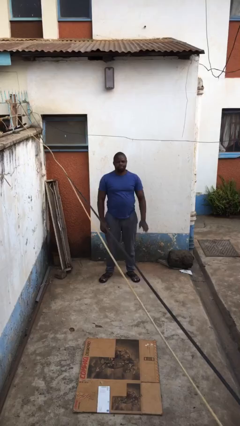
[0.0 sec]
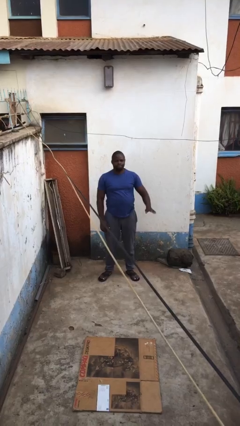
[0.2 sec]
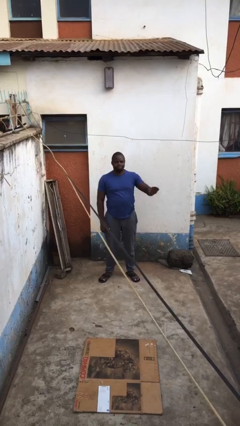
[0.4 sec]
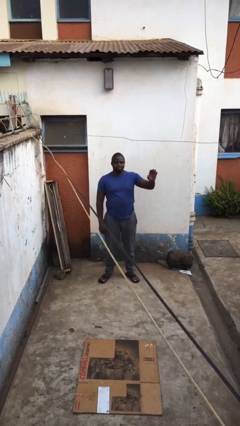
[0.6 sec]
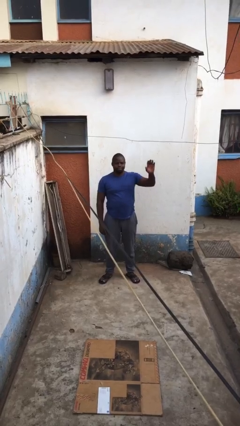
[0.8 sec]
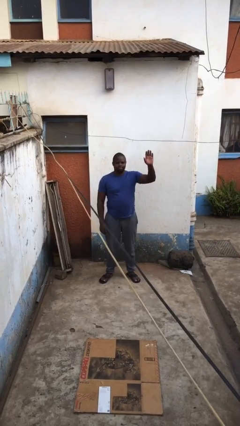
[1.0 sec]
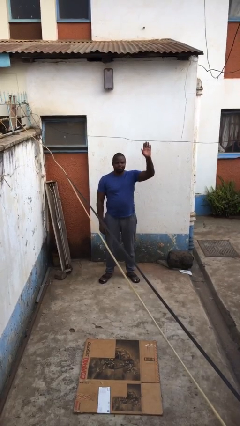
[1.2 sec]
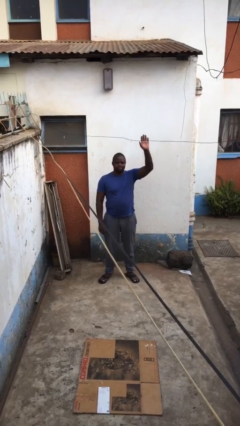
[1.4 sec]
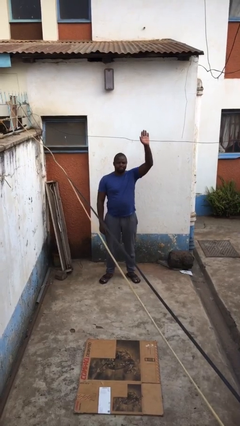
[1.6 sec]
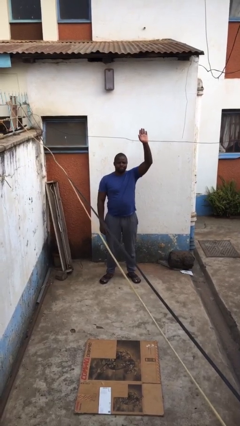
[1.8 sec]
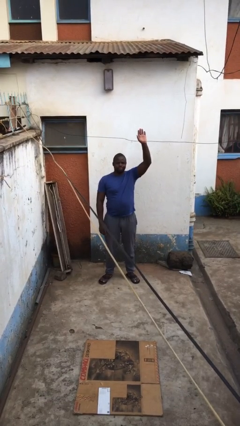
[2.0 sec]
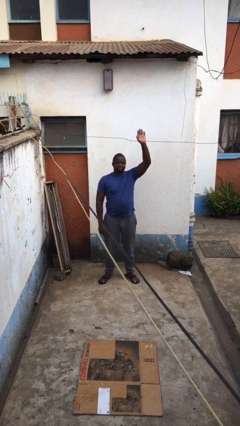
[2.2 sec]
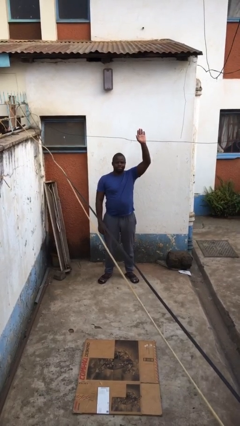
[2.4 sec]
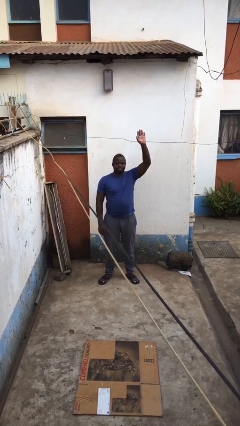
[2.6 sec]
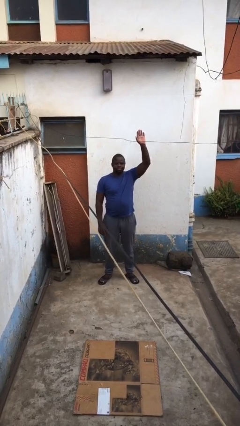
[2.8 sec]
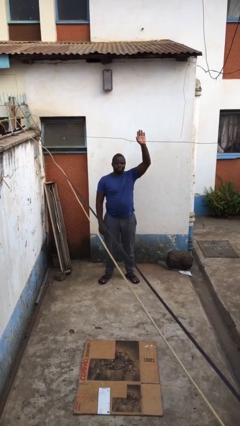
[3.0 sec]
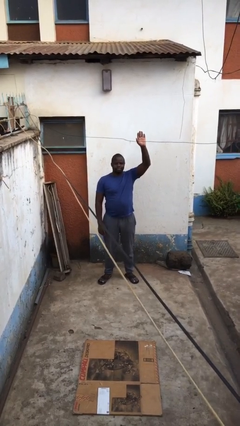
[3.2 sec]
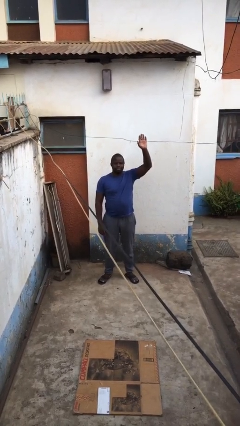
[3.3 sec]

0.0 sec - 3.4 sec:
person gestures raise hand

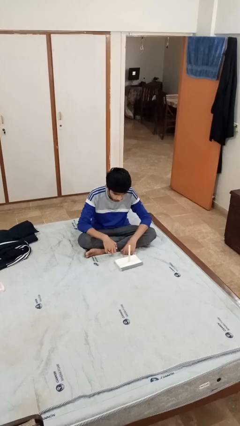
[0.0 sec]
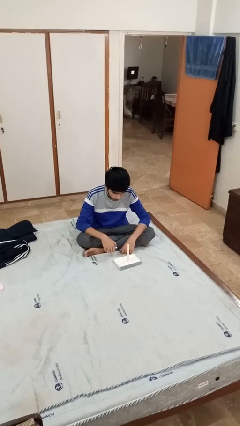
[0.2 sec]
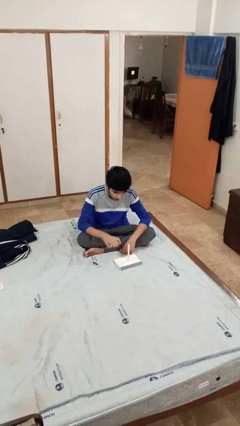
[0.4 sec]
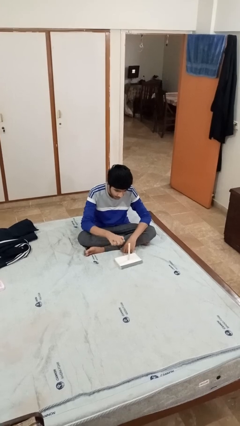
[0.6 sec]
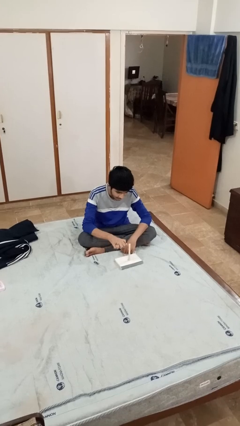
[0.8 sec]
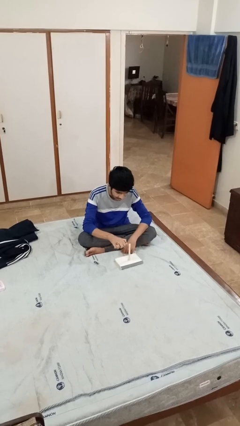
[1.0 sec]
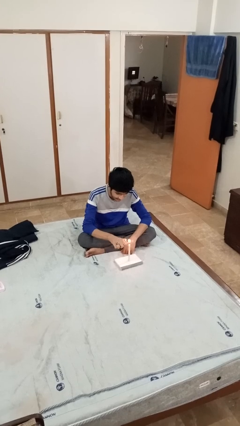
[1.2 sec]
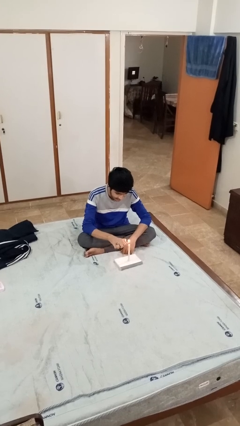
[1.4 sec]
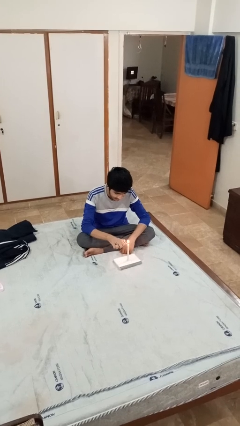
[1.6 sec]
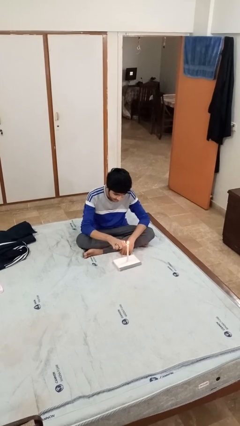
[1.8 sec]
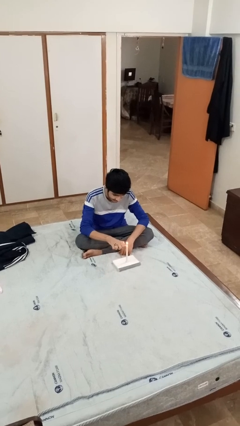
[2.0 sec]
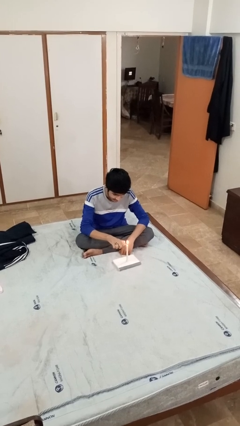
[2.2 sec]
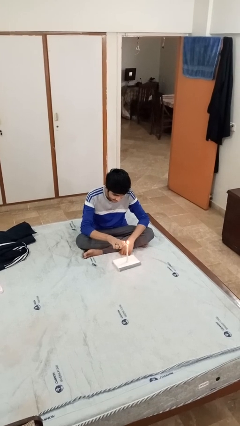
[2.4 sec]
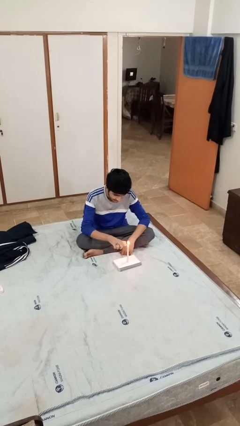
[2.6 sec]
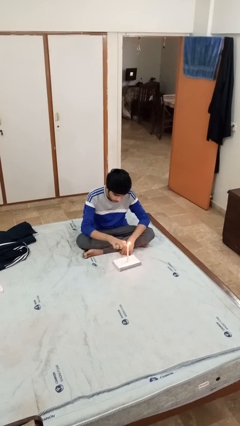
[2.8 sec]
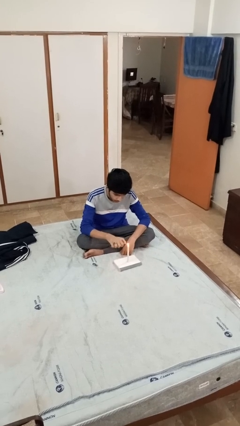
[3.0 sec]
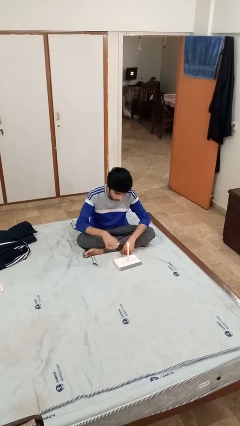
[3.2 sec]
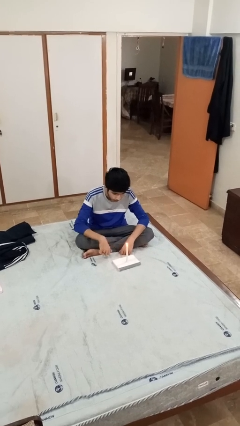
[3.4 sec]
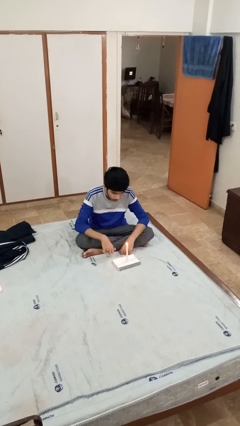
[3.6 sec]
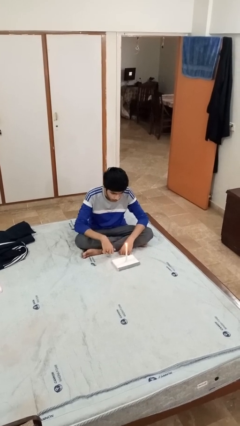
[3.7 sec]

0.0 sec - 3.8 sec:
person lights candle

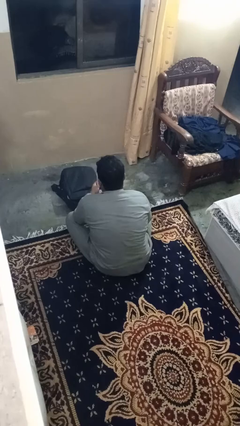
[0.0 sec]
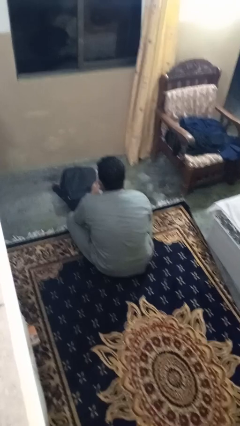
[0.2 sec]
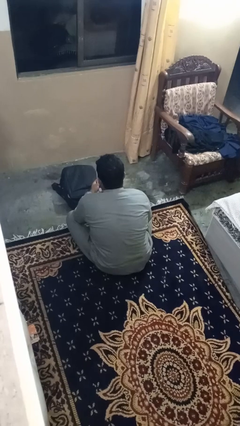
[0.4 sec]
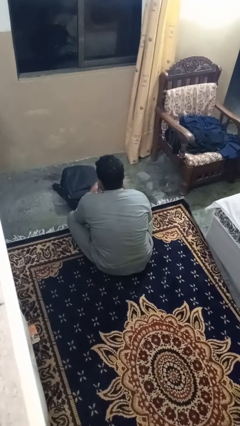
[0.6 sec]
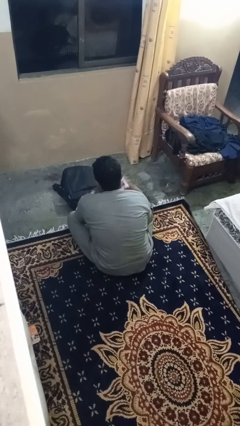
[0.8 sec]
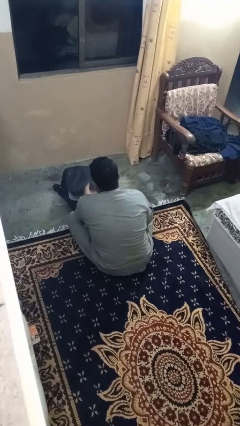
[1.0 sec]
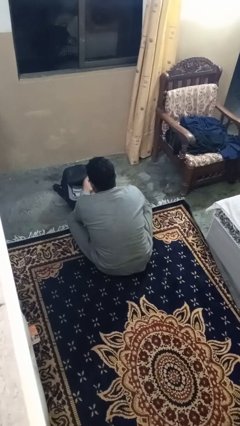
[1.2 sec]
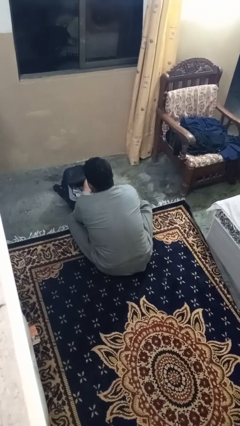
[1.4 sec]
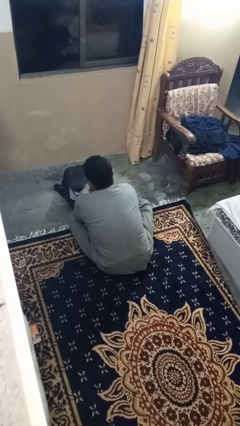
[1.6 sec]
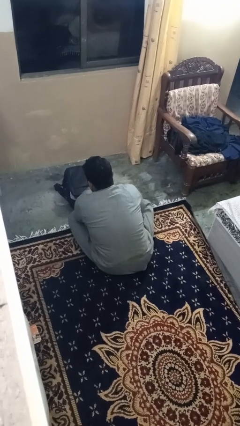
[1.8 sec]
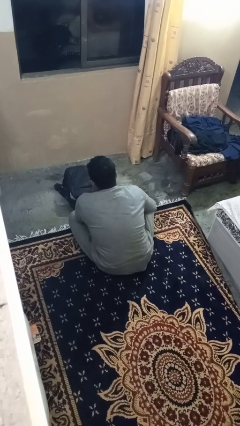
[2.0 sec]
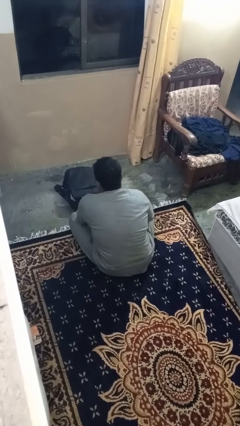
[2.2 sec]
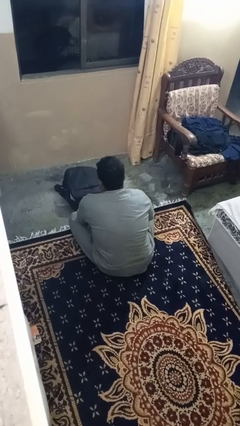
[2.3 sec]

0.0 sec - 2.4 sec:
person puts object into bag

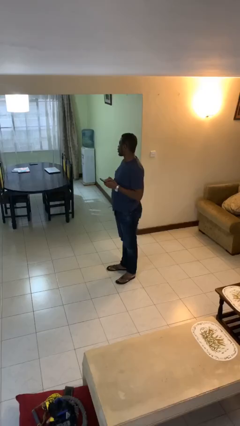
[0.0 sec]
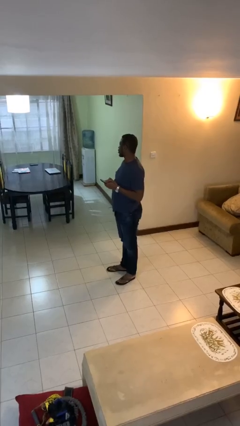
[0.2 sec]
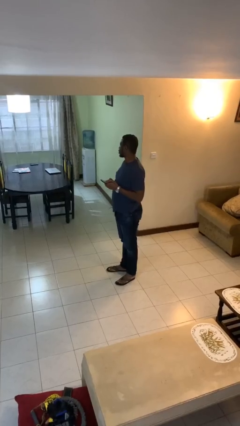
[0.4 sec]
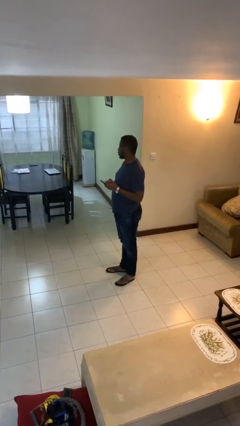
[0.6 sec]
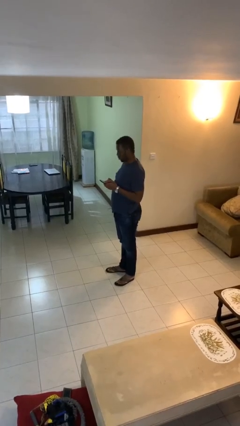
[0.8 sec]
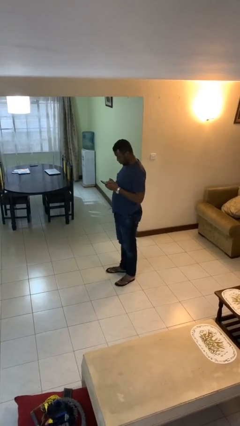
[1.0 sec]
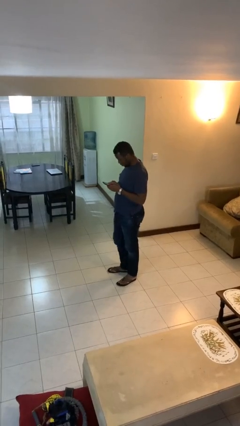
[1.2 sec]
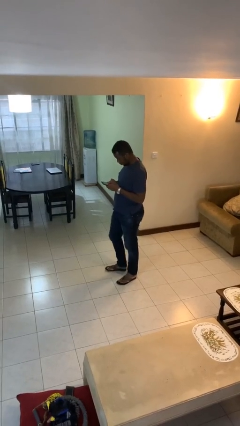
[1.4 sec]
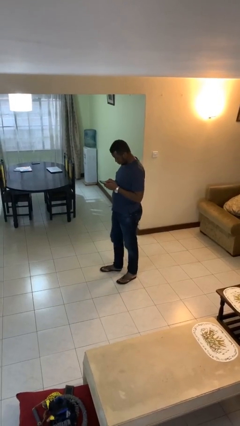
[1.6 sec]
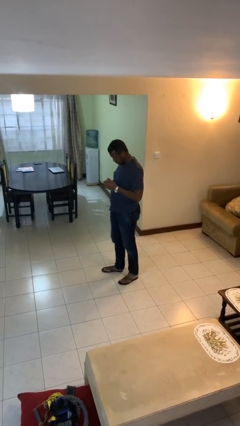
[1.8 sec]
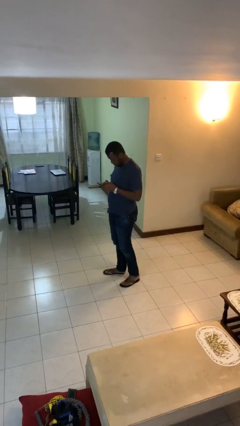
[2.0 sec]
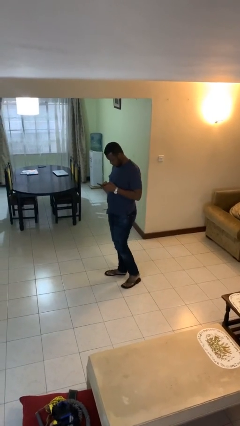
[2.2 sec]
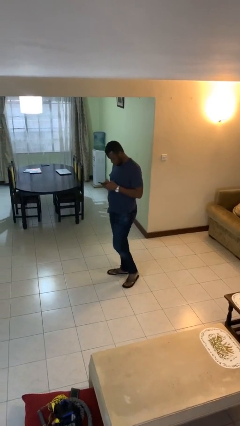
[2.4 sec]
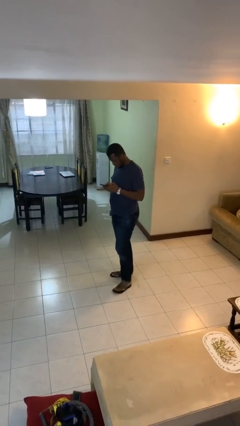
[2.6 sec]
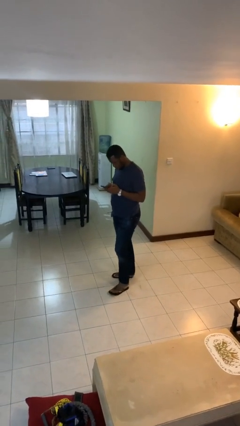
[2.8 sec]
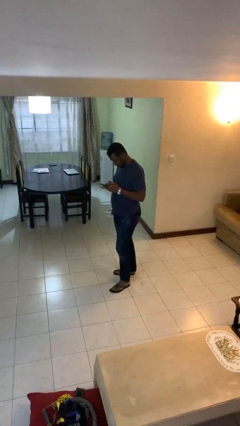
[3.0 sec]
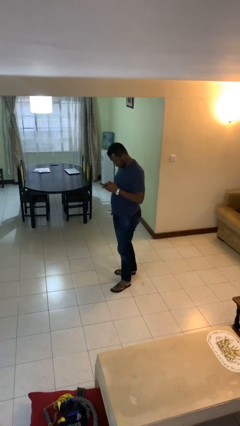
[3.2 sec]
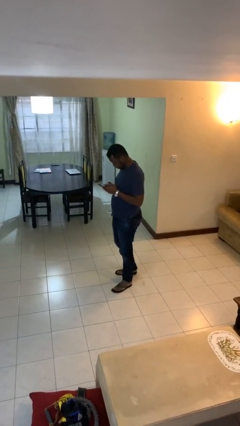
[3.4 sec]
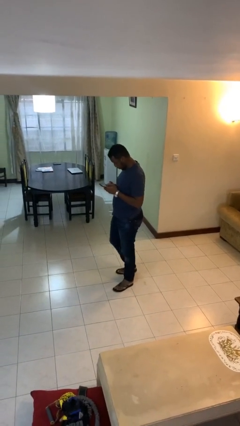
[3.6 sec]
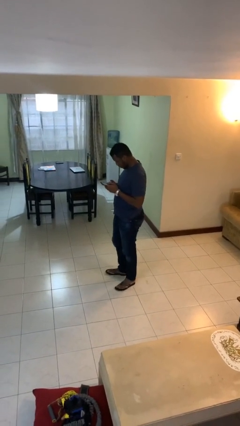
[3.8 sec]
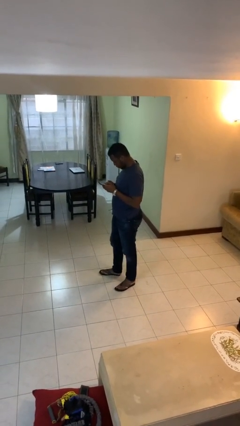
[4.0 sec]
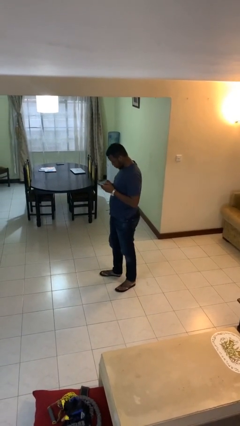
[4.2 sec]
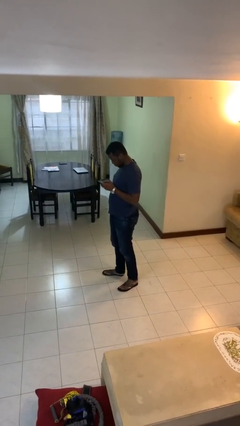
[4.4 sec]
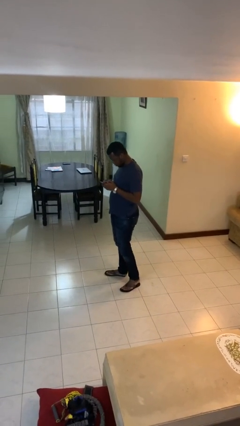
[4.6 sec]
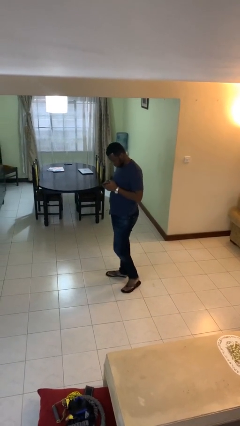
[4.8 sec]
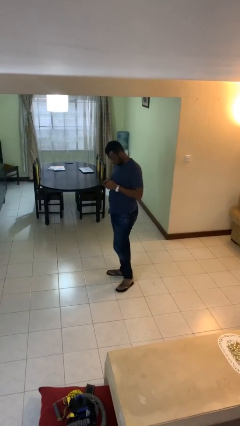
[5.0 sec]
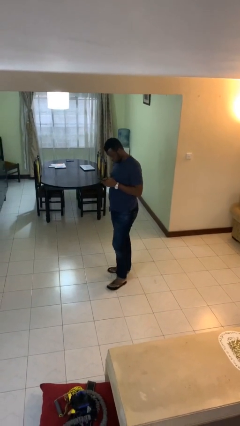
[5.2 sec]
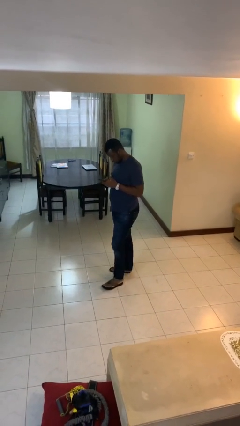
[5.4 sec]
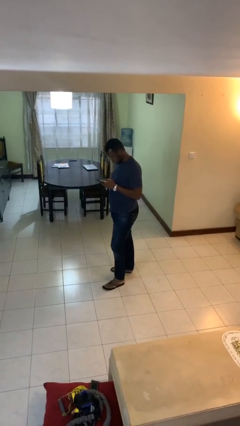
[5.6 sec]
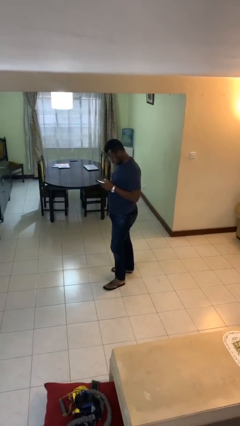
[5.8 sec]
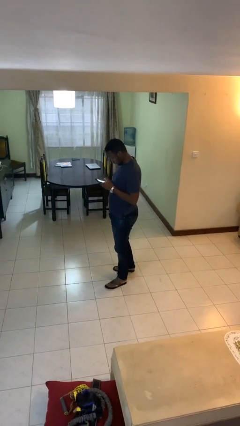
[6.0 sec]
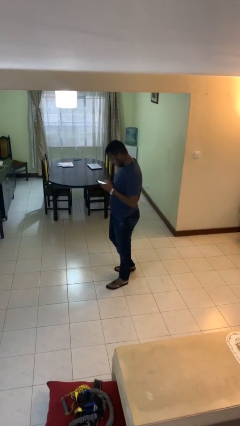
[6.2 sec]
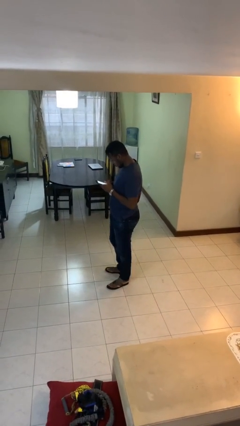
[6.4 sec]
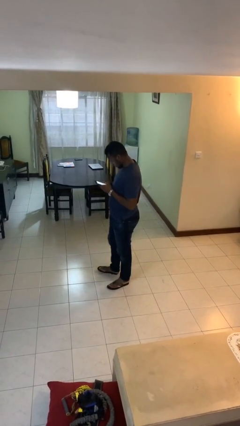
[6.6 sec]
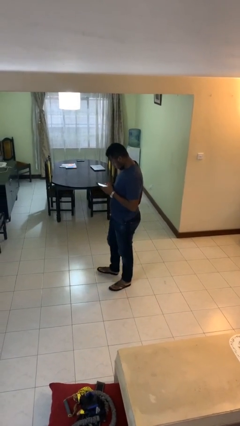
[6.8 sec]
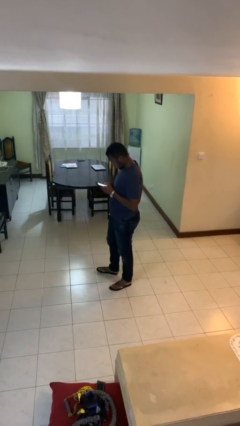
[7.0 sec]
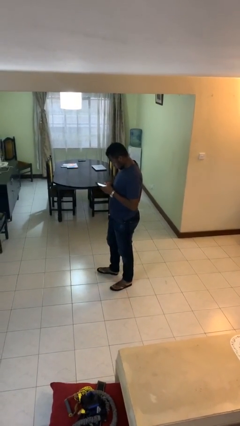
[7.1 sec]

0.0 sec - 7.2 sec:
person texts on phone

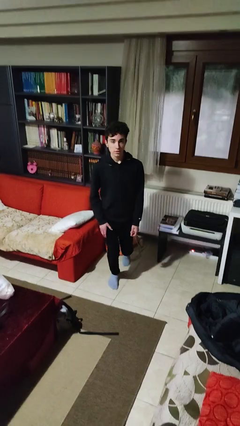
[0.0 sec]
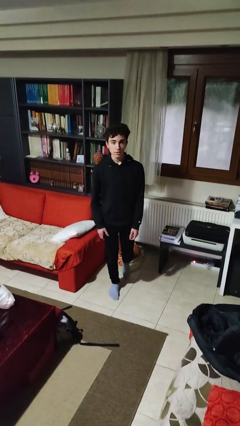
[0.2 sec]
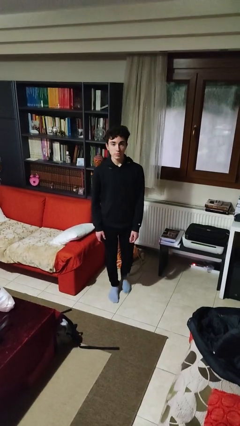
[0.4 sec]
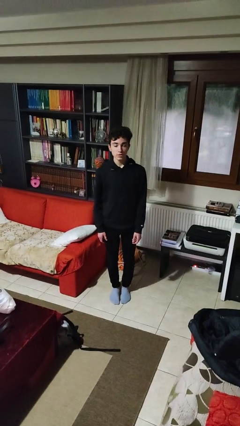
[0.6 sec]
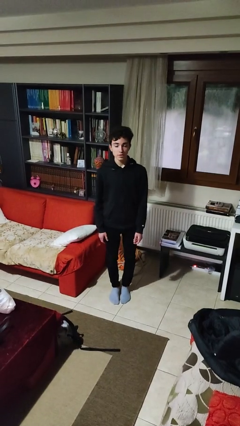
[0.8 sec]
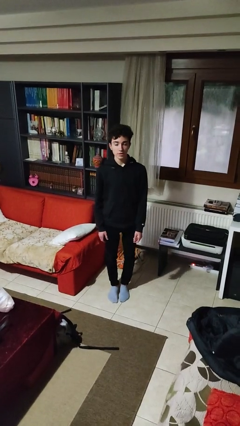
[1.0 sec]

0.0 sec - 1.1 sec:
person stands up from floor
